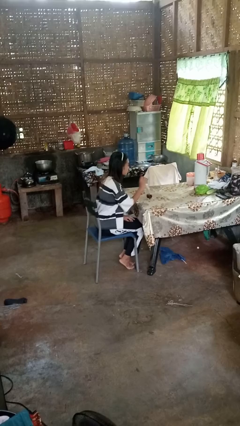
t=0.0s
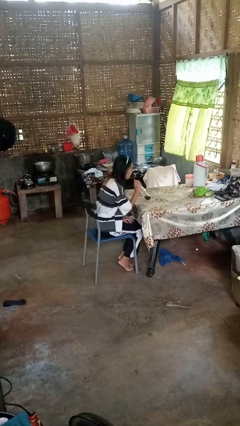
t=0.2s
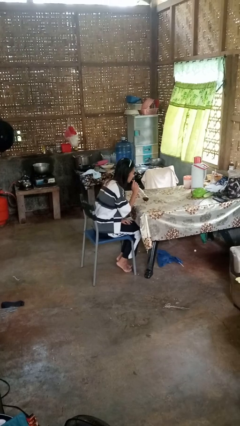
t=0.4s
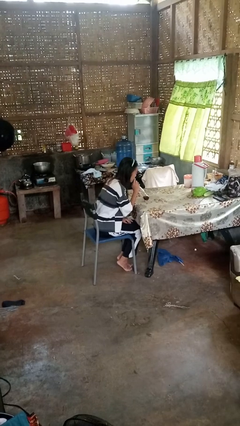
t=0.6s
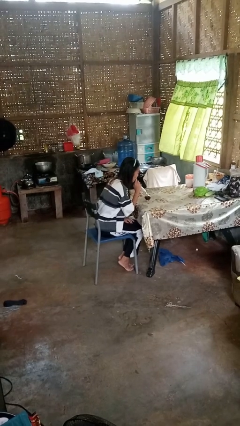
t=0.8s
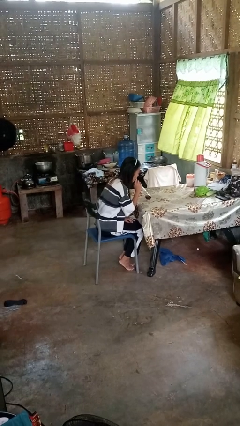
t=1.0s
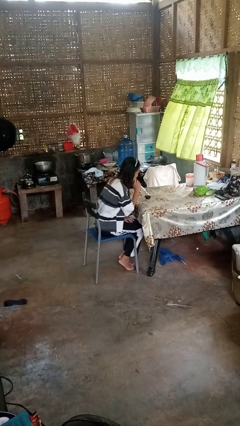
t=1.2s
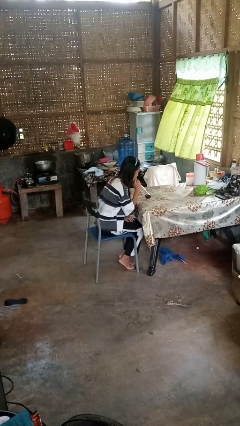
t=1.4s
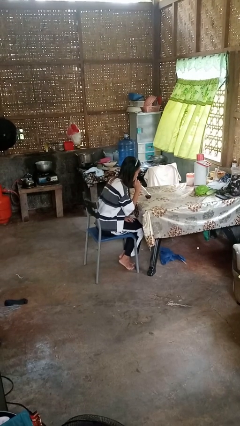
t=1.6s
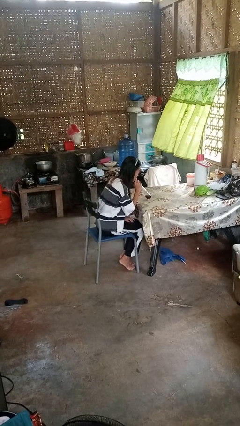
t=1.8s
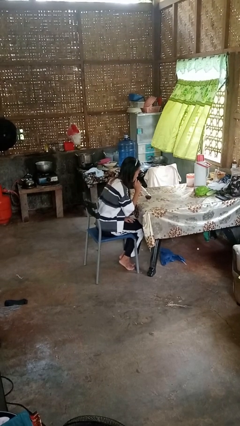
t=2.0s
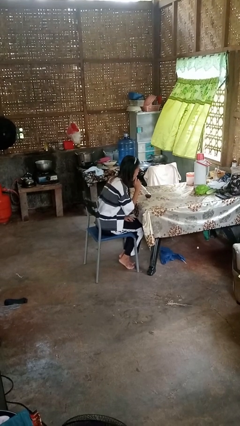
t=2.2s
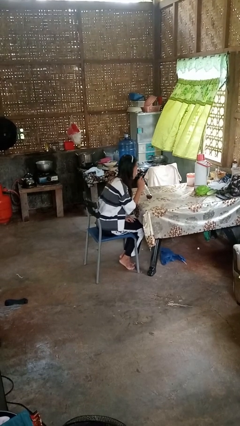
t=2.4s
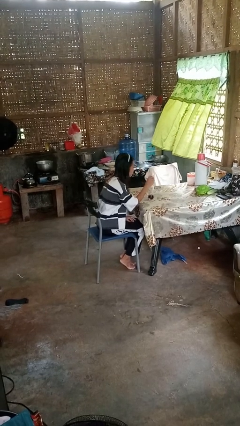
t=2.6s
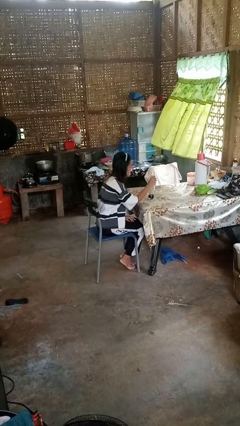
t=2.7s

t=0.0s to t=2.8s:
person drinks from straw

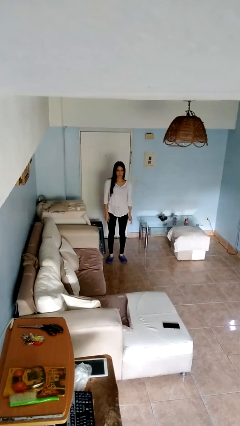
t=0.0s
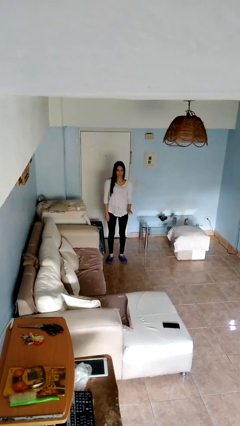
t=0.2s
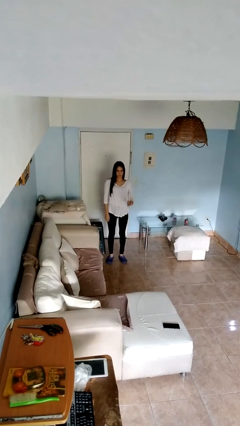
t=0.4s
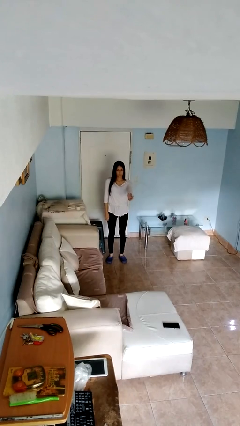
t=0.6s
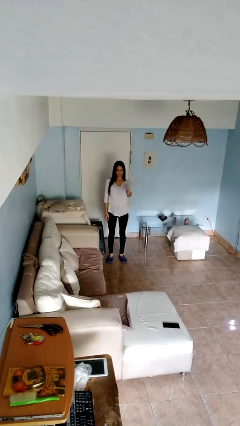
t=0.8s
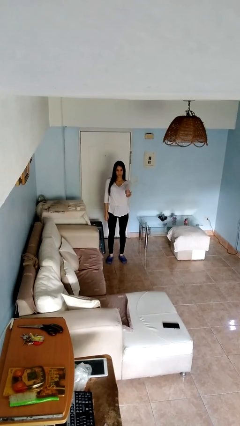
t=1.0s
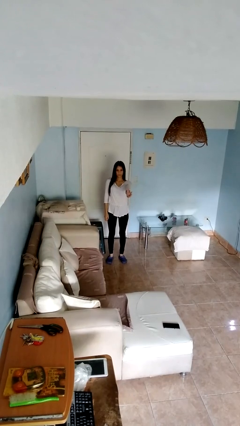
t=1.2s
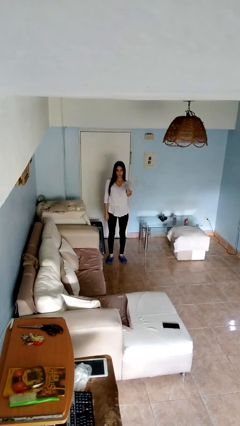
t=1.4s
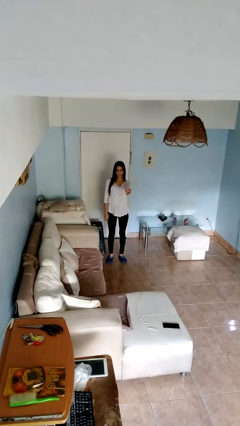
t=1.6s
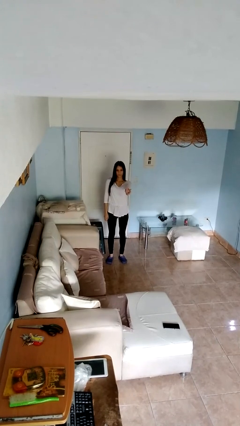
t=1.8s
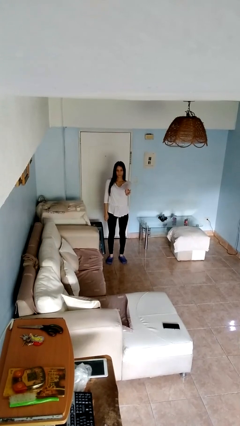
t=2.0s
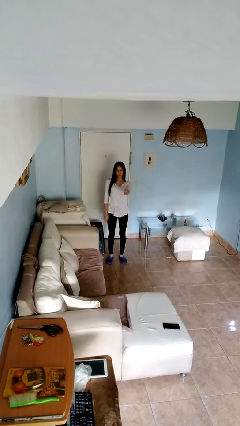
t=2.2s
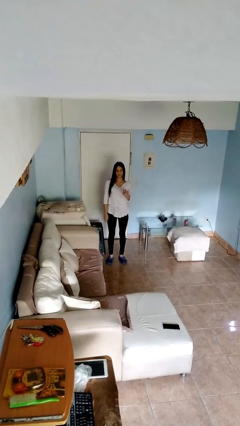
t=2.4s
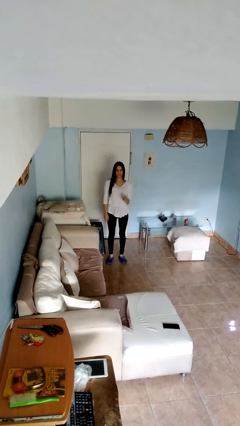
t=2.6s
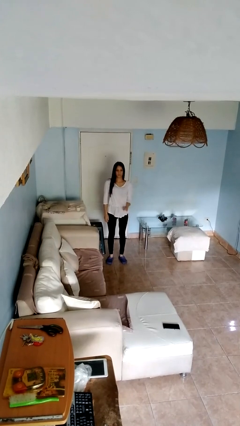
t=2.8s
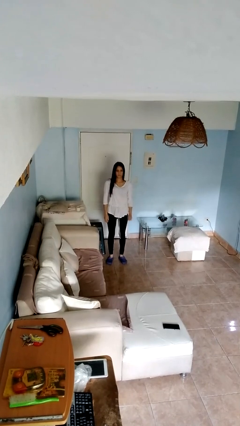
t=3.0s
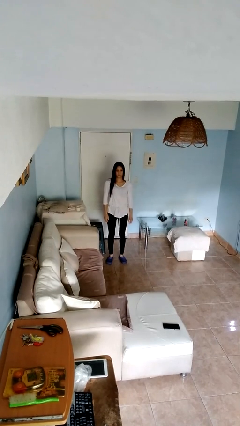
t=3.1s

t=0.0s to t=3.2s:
person gestures number three

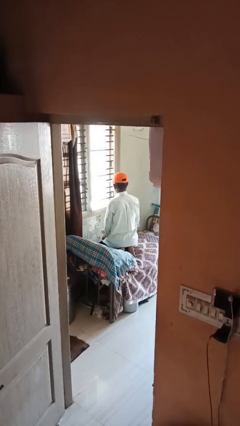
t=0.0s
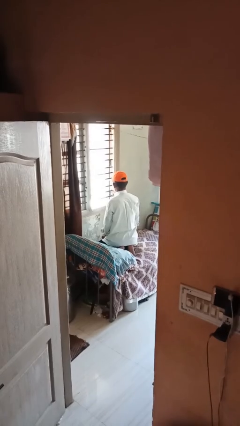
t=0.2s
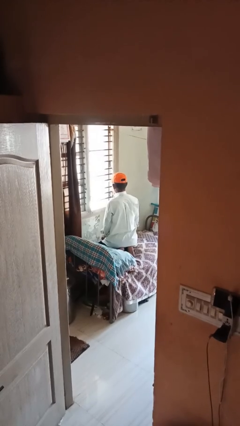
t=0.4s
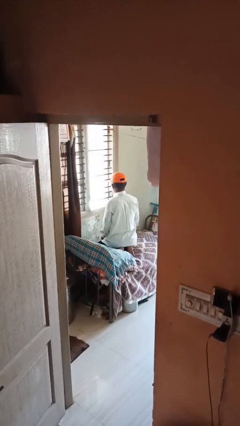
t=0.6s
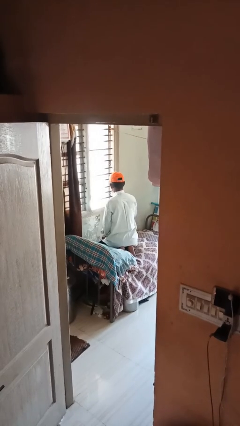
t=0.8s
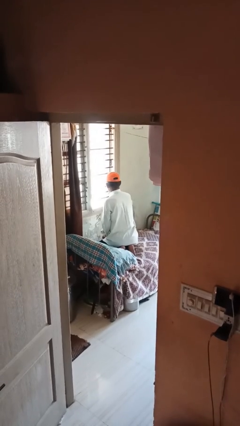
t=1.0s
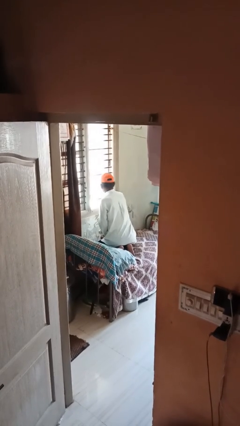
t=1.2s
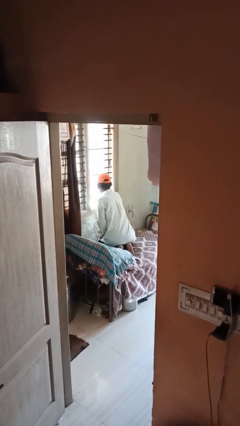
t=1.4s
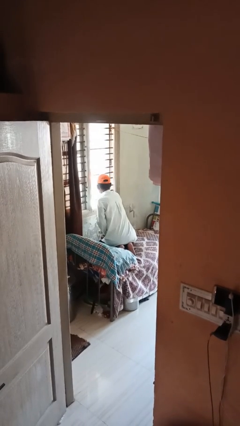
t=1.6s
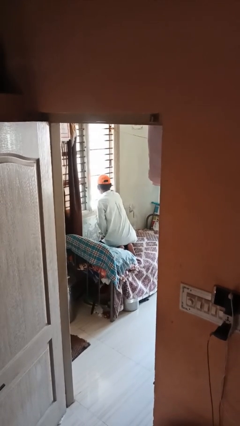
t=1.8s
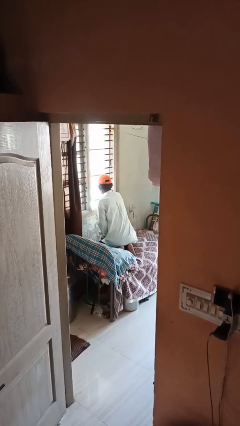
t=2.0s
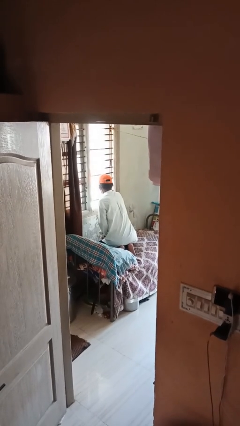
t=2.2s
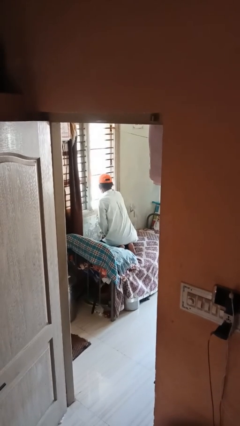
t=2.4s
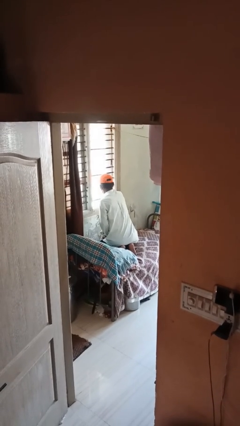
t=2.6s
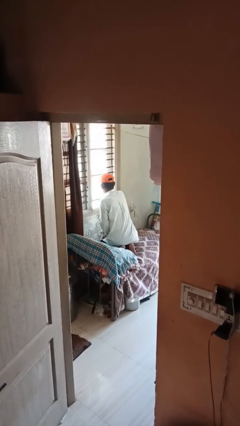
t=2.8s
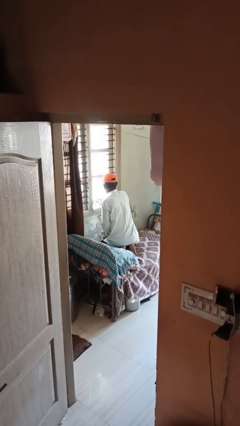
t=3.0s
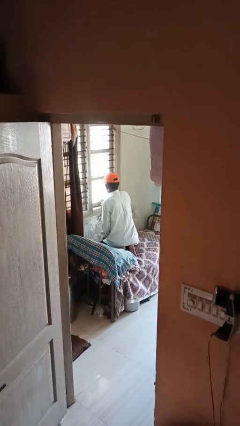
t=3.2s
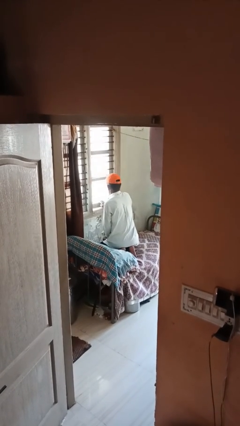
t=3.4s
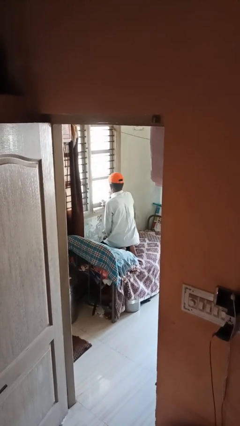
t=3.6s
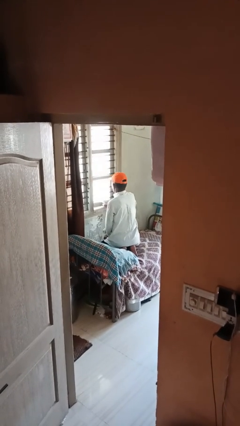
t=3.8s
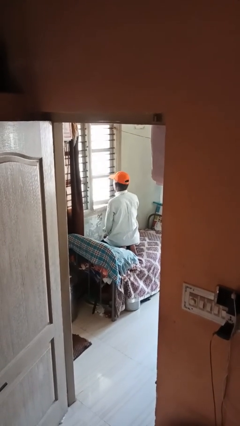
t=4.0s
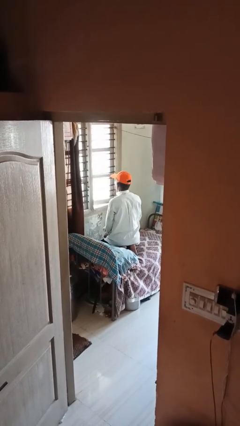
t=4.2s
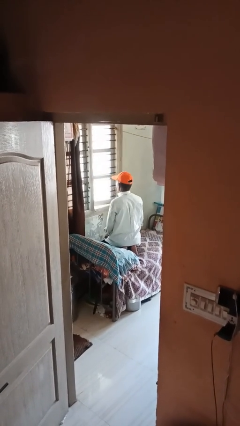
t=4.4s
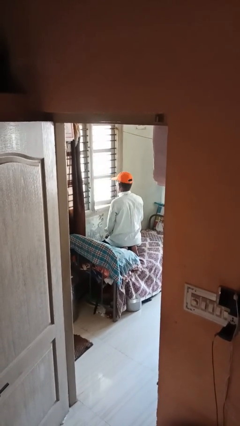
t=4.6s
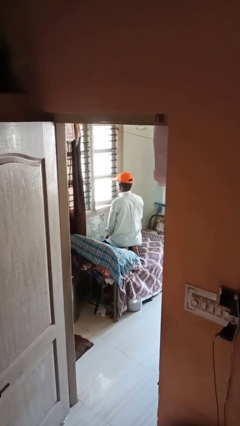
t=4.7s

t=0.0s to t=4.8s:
person closes home window

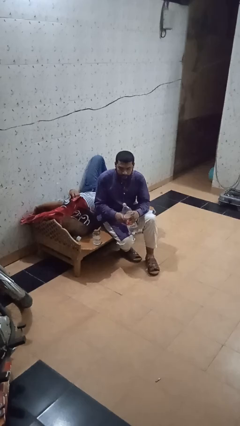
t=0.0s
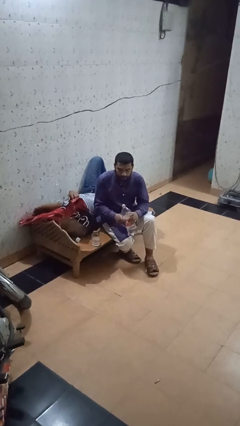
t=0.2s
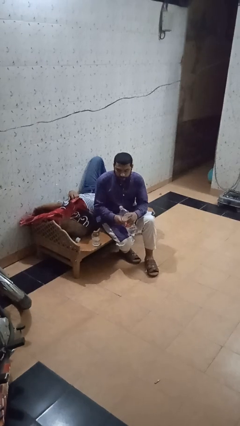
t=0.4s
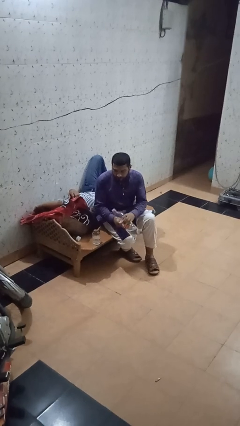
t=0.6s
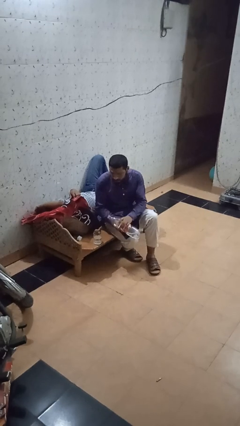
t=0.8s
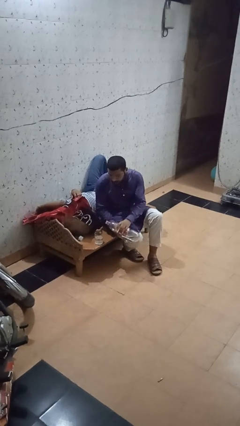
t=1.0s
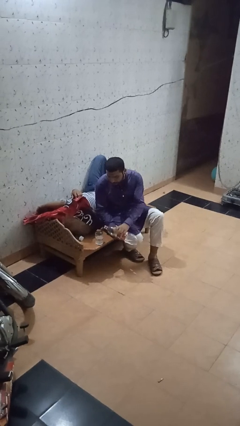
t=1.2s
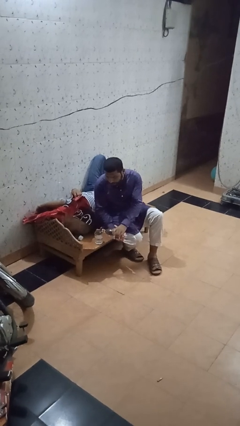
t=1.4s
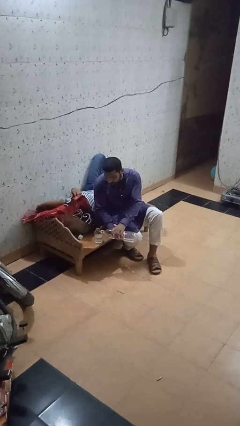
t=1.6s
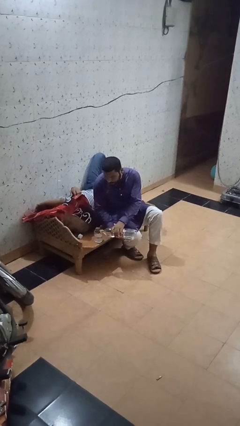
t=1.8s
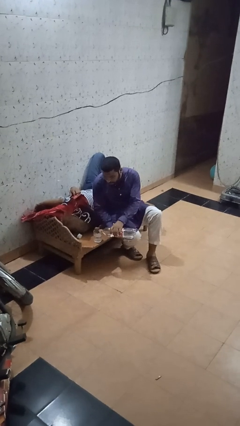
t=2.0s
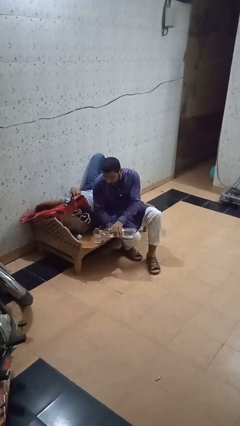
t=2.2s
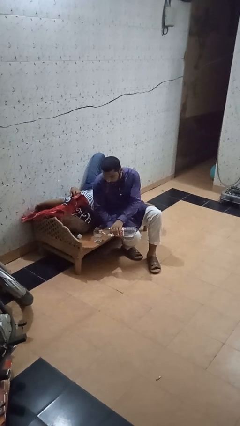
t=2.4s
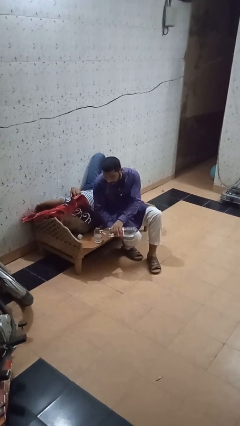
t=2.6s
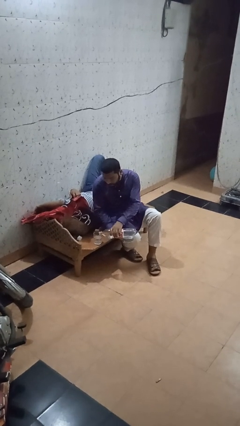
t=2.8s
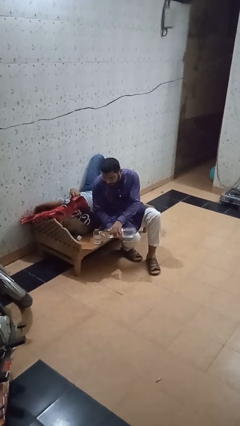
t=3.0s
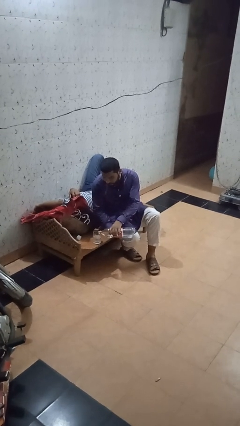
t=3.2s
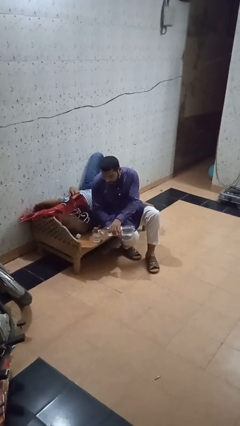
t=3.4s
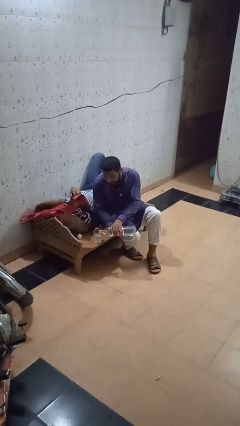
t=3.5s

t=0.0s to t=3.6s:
person pours liquid into cup

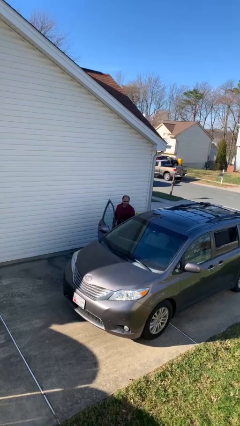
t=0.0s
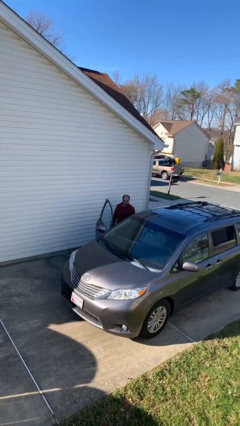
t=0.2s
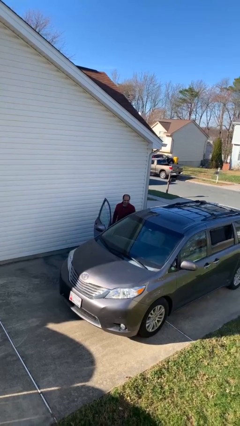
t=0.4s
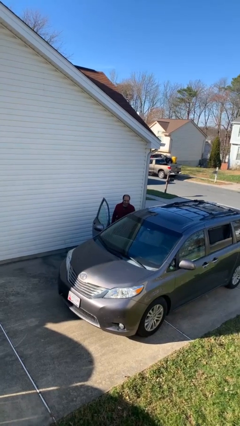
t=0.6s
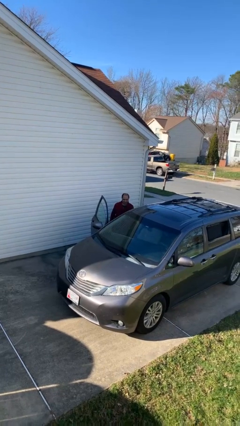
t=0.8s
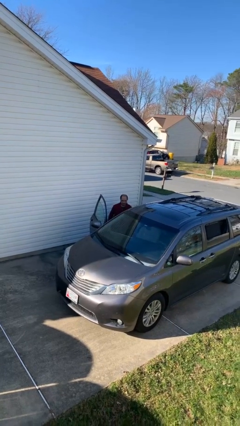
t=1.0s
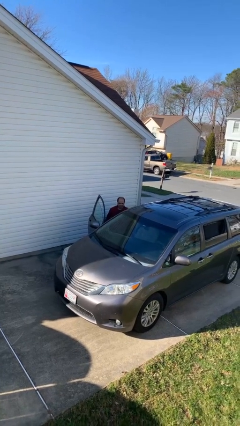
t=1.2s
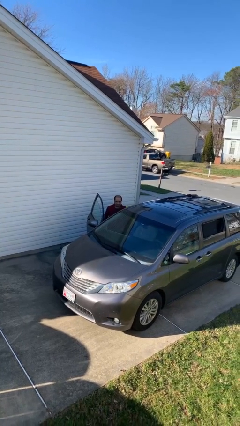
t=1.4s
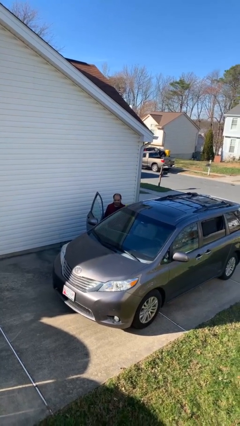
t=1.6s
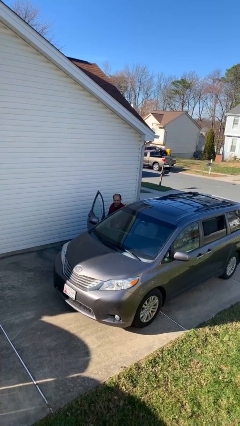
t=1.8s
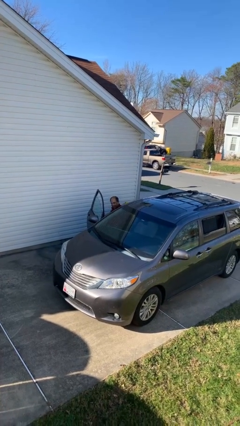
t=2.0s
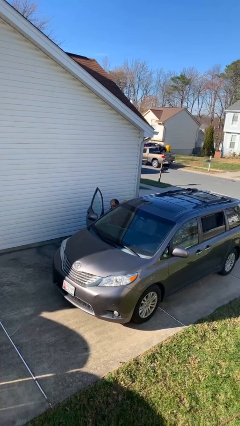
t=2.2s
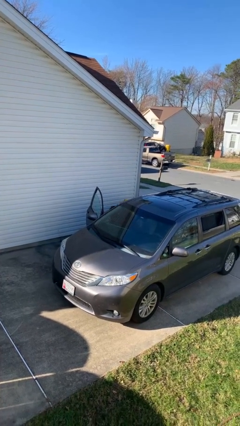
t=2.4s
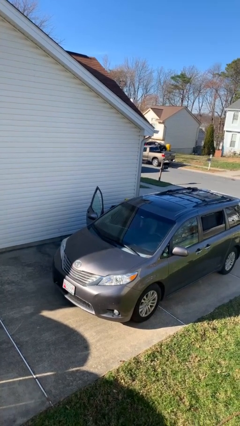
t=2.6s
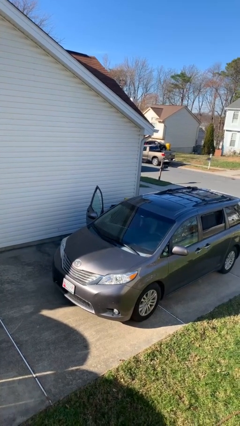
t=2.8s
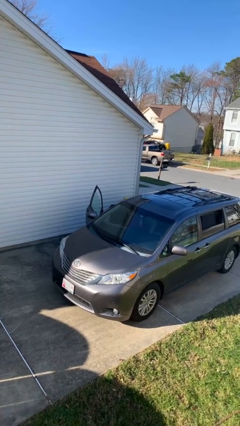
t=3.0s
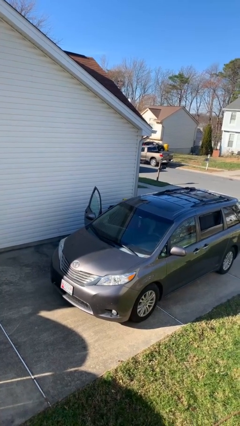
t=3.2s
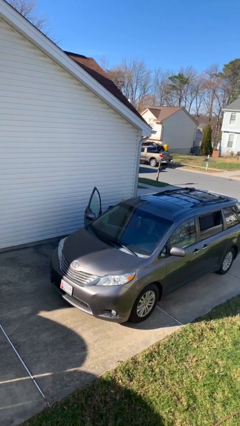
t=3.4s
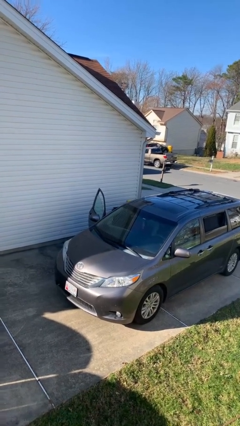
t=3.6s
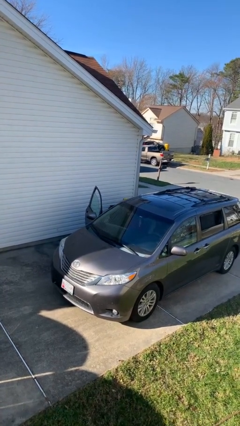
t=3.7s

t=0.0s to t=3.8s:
person enters car
